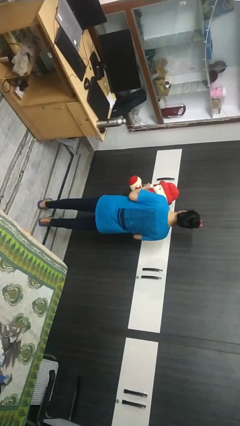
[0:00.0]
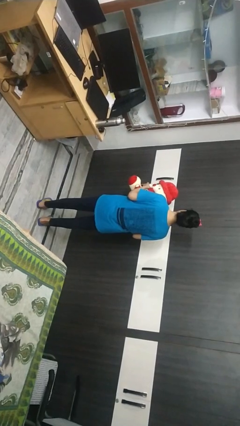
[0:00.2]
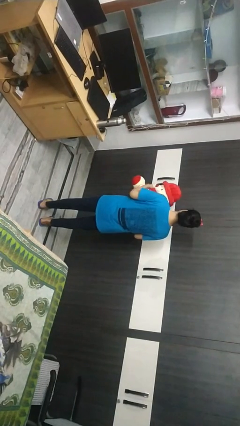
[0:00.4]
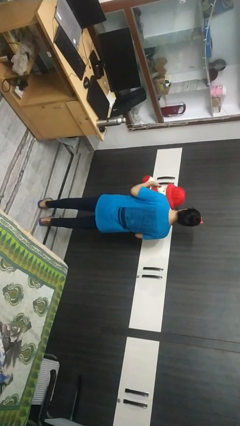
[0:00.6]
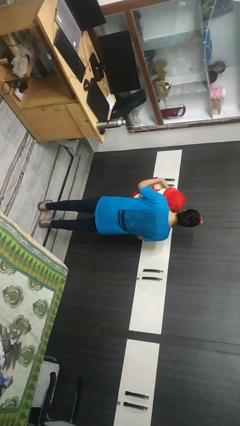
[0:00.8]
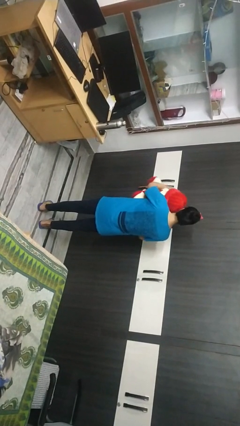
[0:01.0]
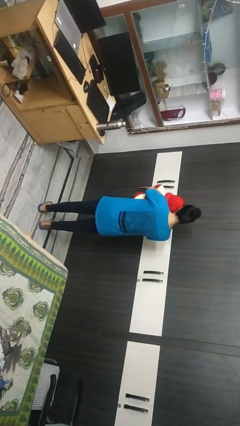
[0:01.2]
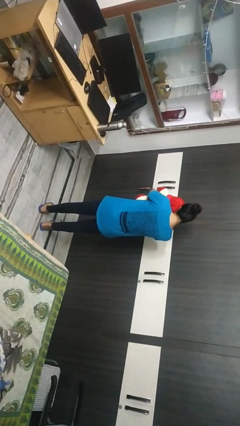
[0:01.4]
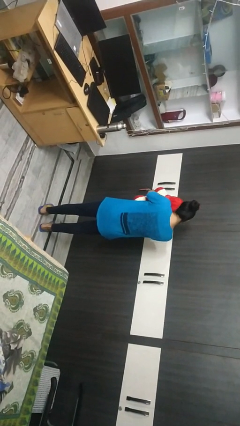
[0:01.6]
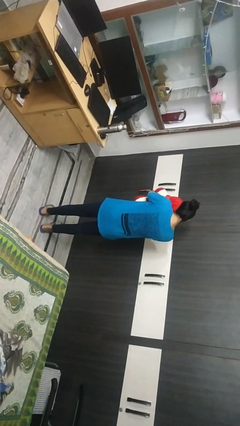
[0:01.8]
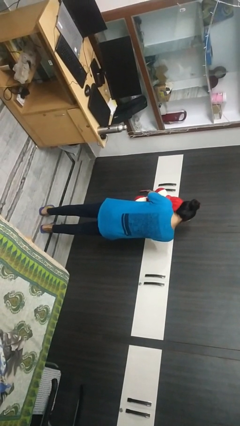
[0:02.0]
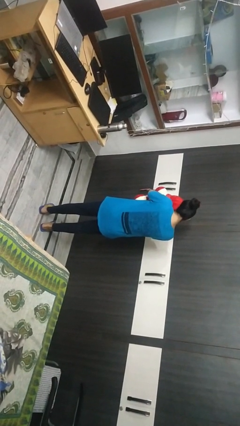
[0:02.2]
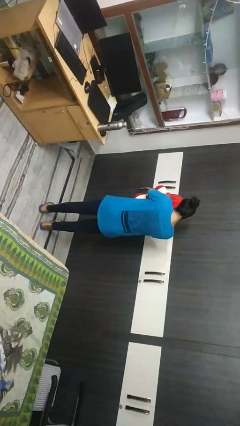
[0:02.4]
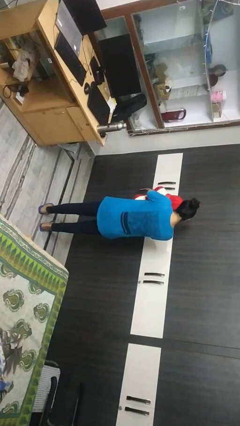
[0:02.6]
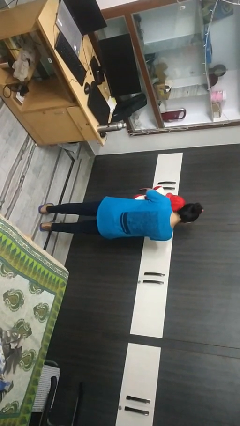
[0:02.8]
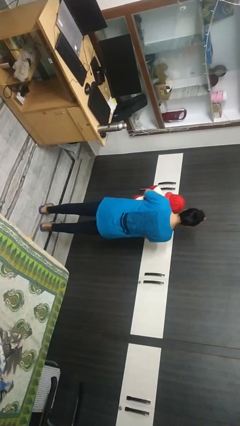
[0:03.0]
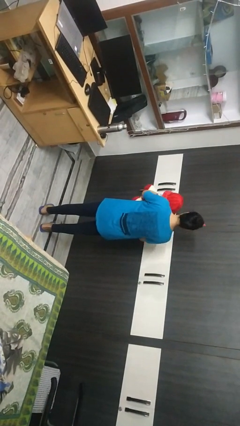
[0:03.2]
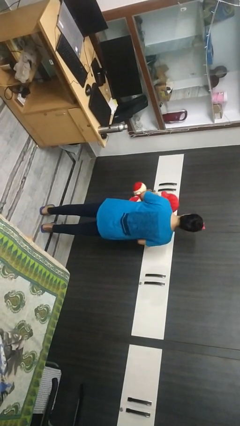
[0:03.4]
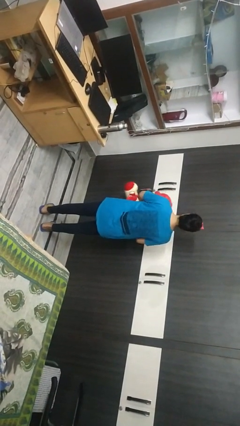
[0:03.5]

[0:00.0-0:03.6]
person hugs stuffed animal

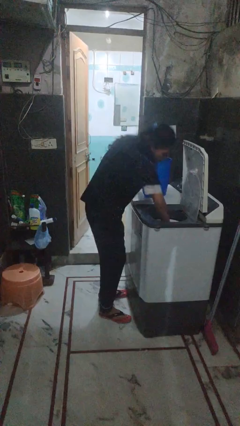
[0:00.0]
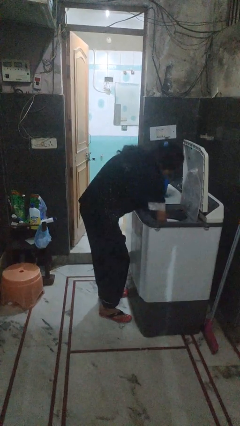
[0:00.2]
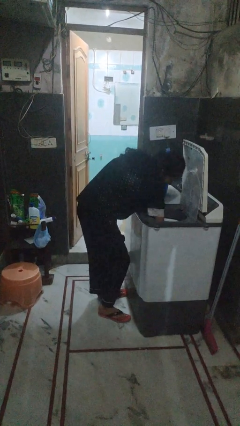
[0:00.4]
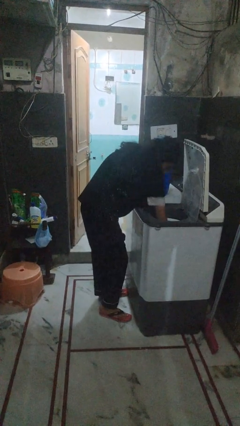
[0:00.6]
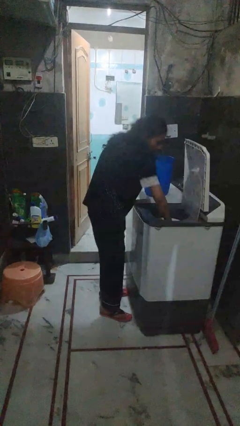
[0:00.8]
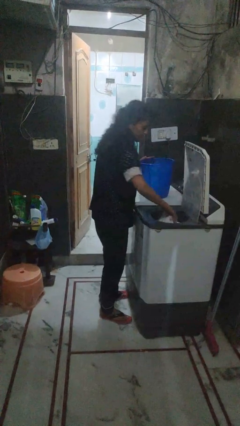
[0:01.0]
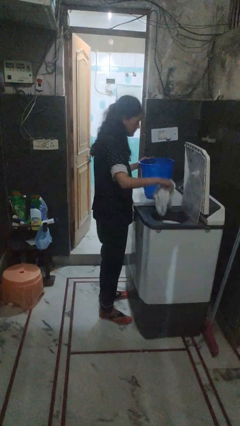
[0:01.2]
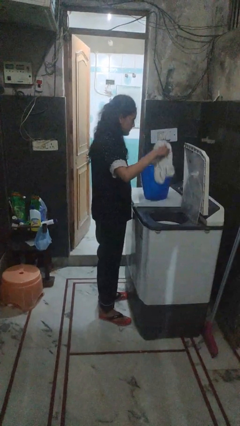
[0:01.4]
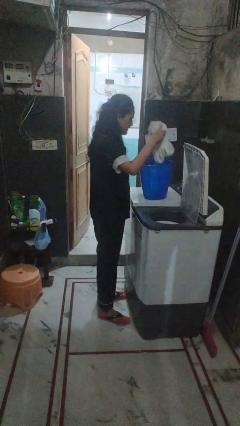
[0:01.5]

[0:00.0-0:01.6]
person unloads dryer

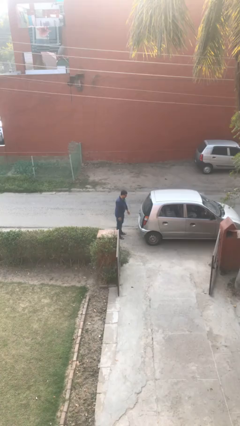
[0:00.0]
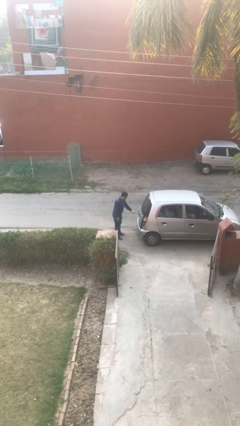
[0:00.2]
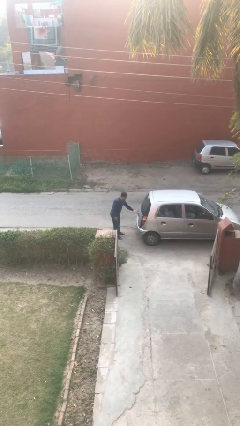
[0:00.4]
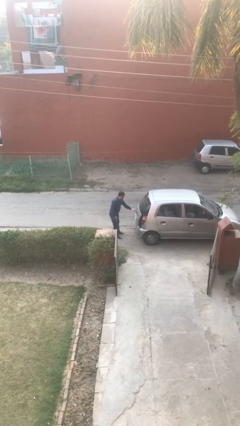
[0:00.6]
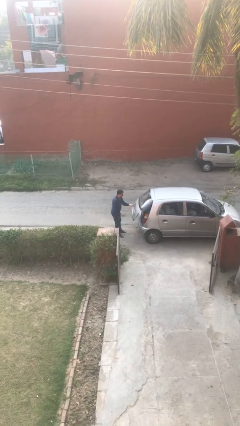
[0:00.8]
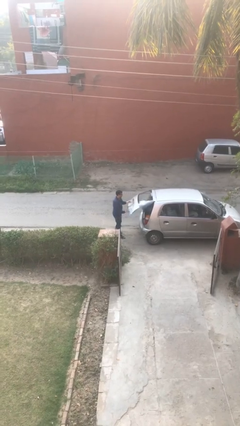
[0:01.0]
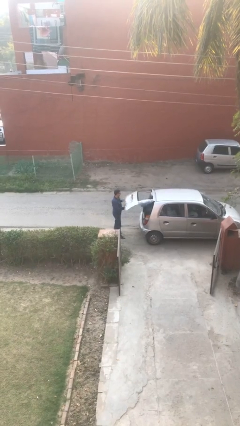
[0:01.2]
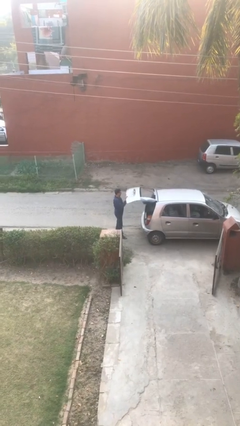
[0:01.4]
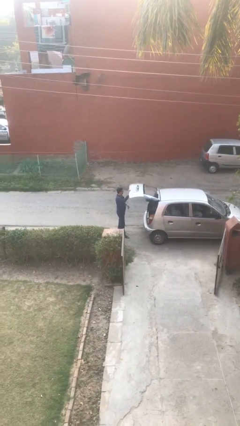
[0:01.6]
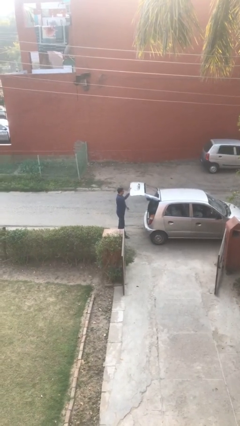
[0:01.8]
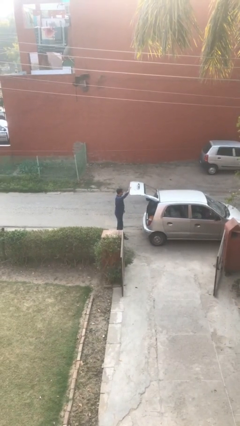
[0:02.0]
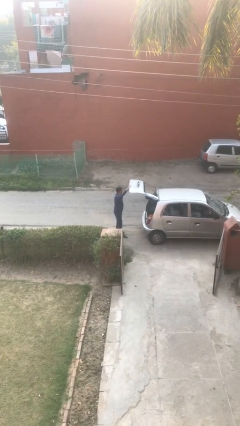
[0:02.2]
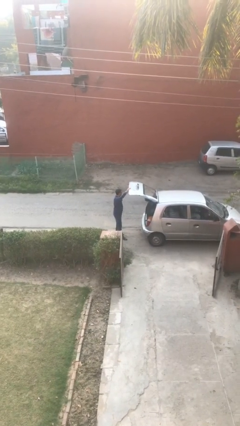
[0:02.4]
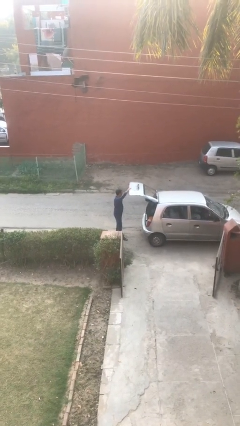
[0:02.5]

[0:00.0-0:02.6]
person opens car trunk

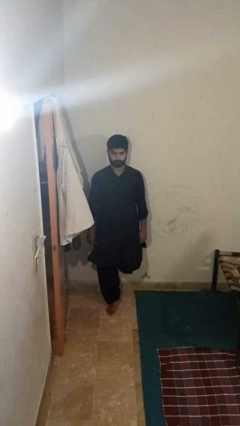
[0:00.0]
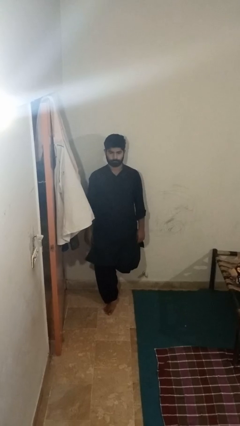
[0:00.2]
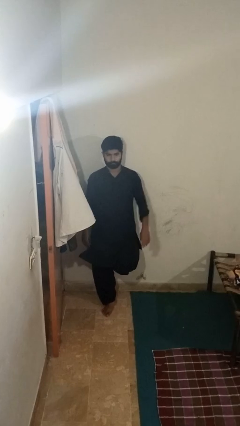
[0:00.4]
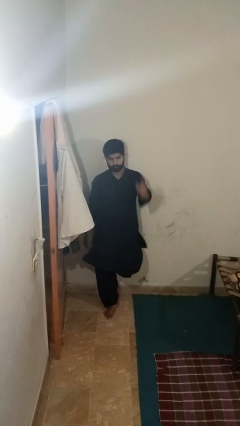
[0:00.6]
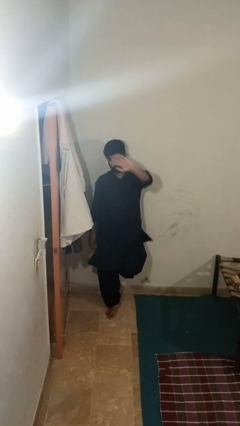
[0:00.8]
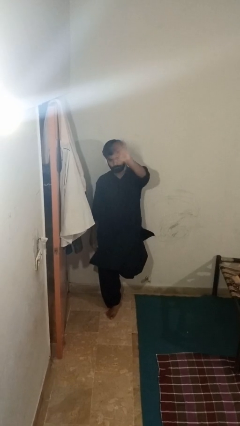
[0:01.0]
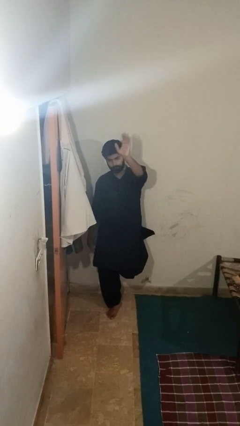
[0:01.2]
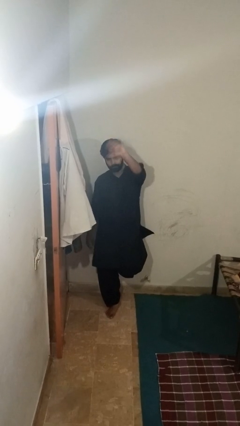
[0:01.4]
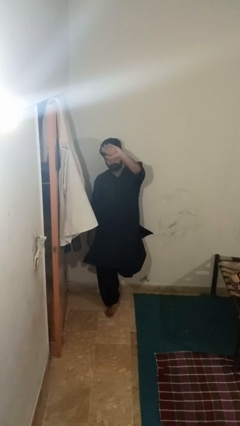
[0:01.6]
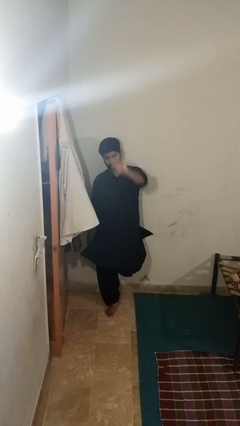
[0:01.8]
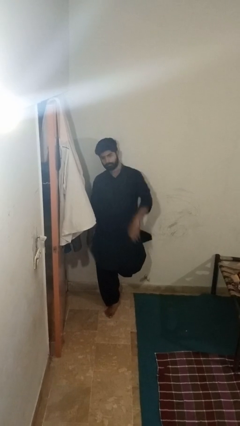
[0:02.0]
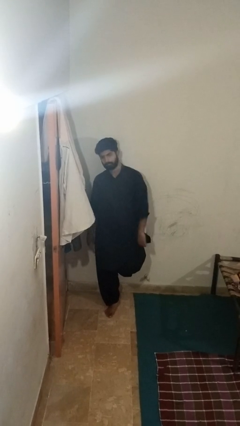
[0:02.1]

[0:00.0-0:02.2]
person waves at person

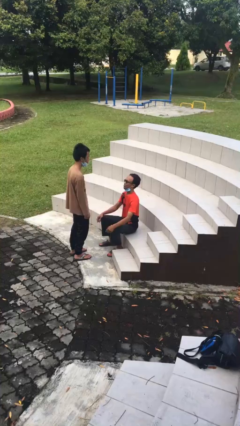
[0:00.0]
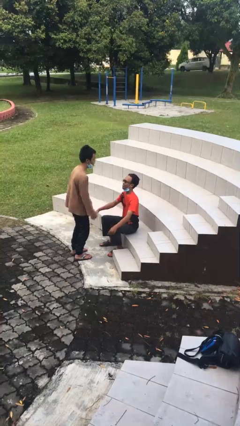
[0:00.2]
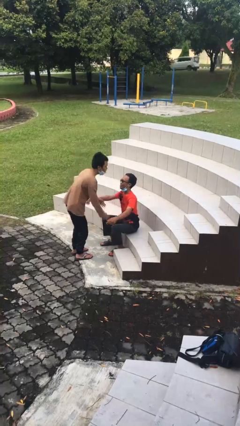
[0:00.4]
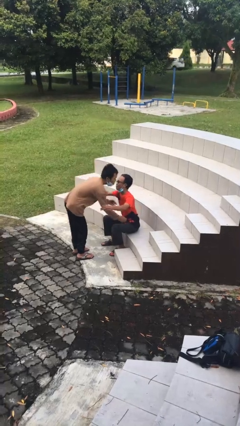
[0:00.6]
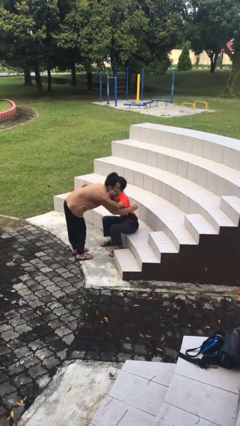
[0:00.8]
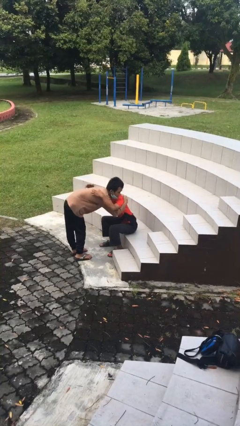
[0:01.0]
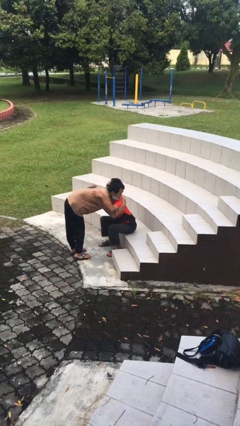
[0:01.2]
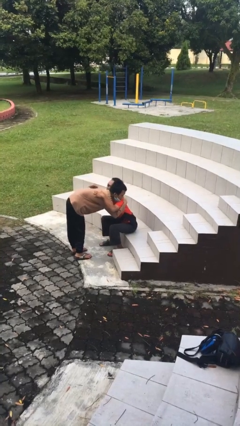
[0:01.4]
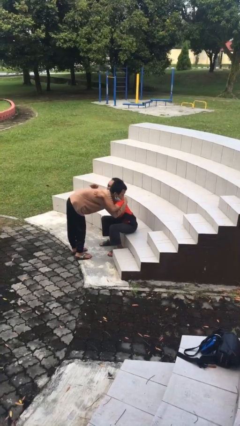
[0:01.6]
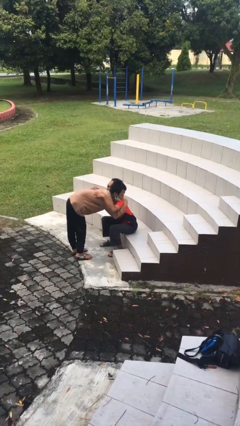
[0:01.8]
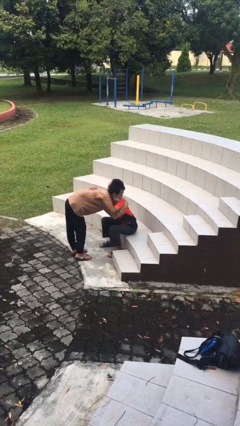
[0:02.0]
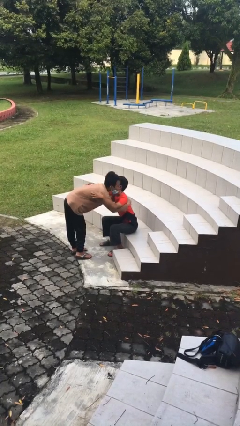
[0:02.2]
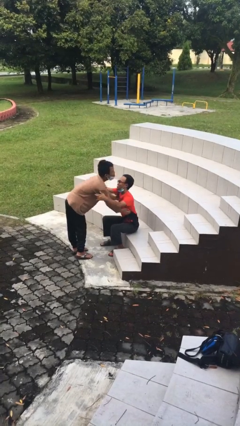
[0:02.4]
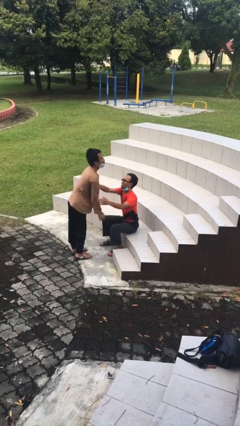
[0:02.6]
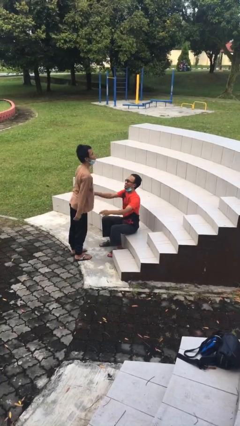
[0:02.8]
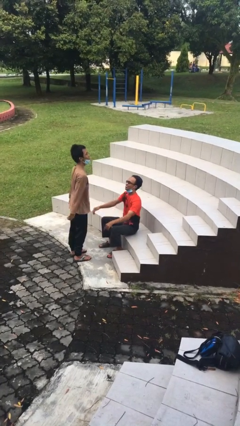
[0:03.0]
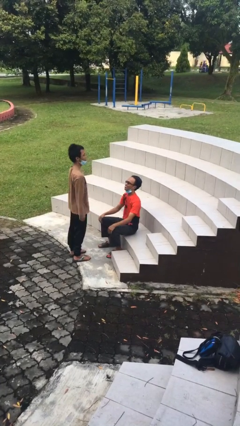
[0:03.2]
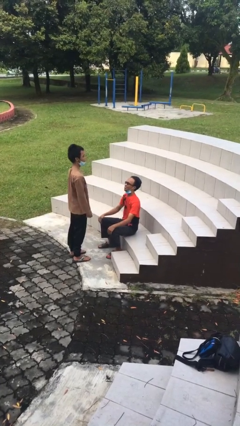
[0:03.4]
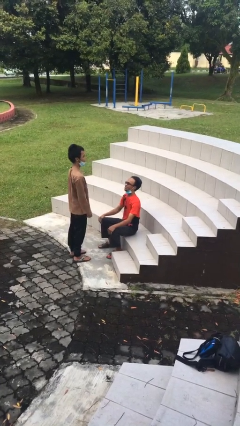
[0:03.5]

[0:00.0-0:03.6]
person embraces person

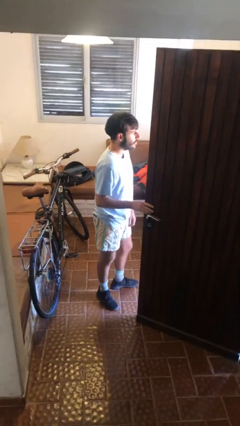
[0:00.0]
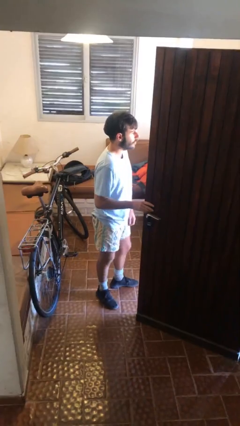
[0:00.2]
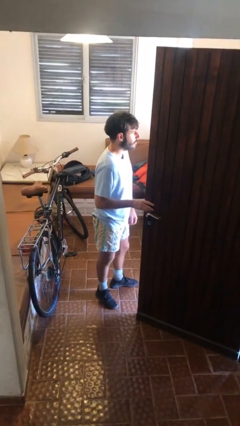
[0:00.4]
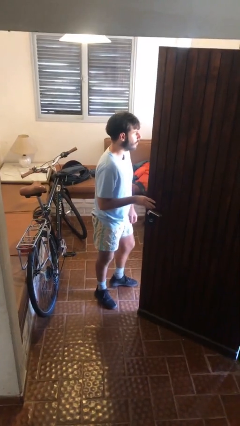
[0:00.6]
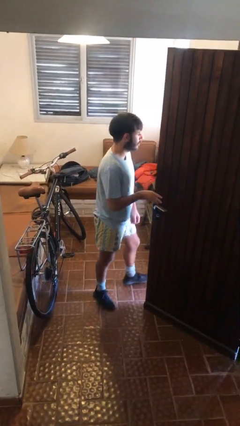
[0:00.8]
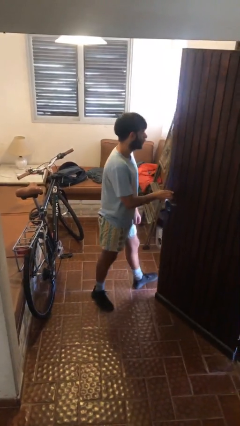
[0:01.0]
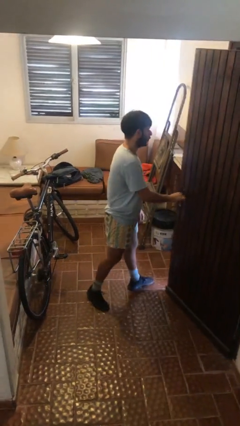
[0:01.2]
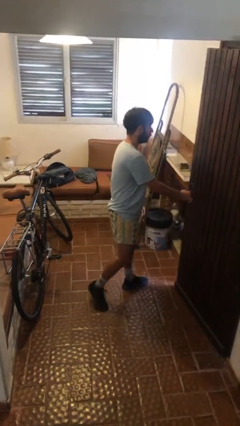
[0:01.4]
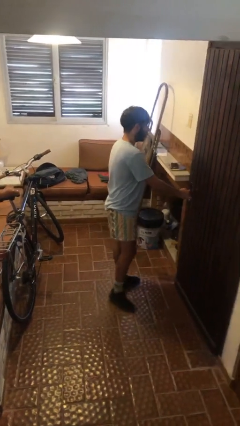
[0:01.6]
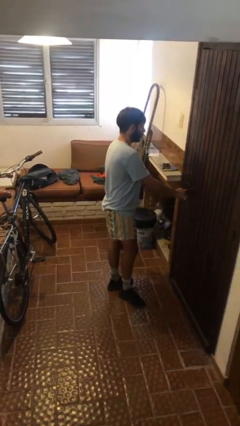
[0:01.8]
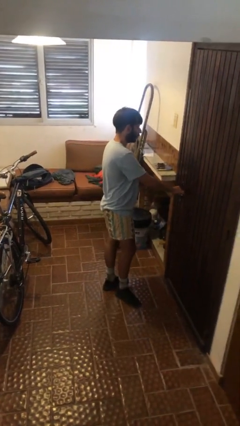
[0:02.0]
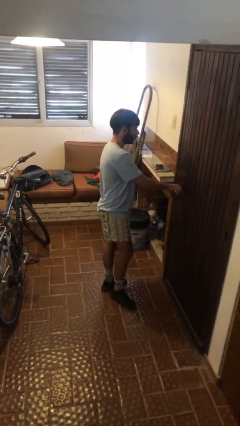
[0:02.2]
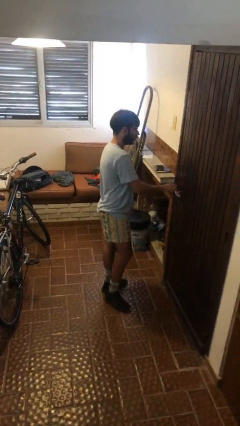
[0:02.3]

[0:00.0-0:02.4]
person closes facility door

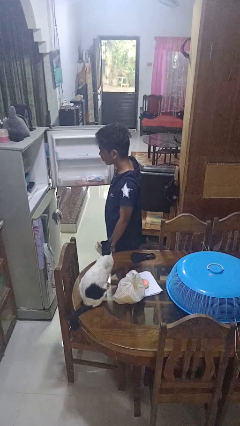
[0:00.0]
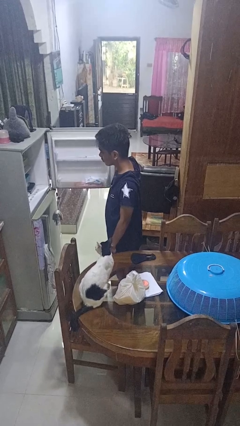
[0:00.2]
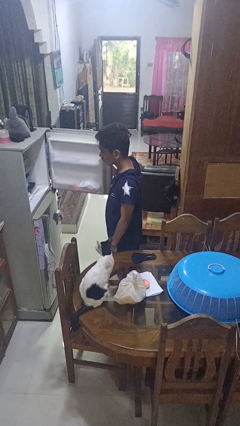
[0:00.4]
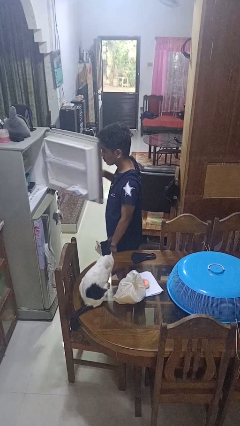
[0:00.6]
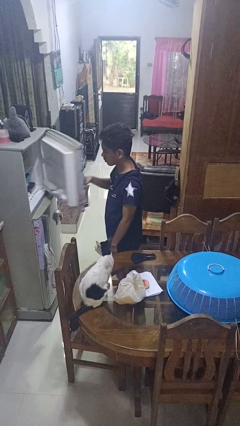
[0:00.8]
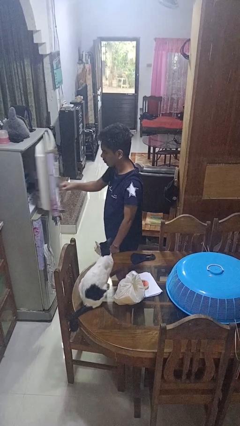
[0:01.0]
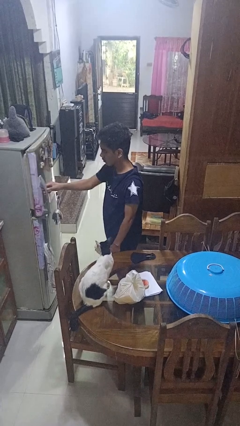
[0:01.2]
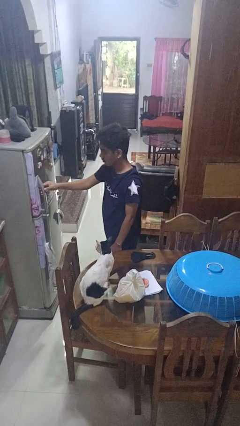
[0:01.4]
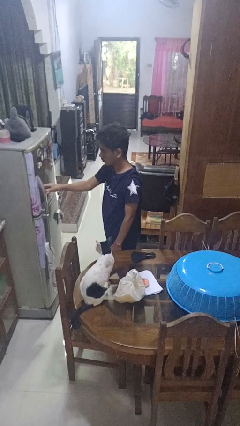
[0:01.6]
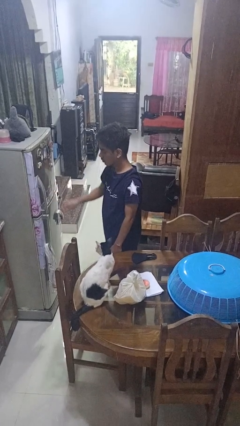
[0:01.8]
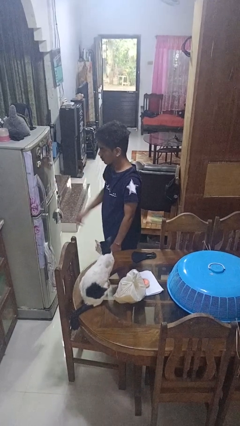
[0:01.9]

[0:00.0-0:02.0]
person closes refrigerator
